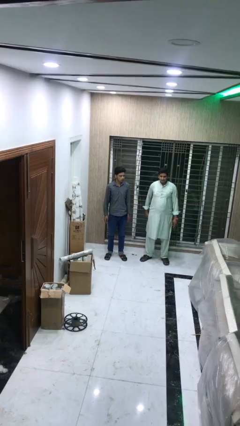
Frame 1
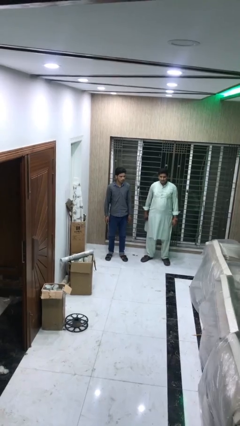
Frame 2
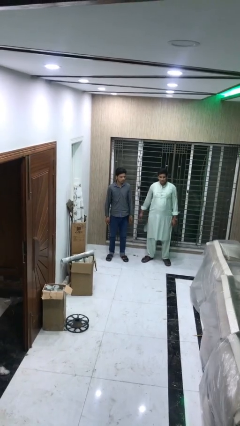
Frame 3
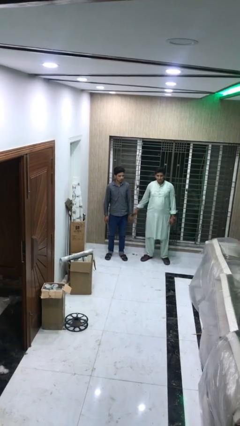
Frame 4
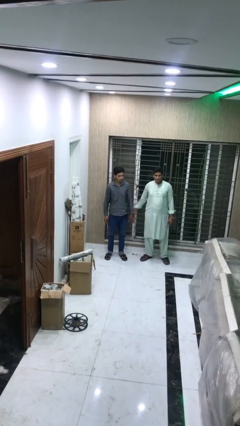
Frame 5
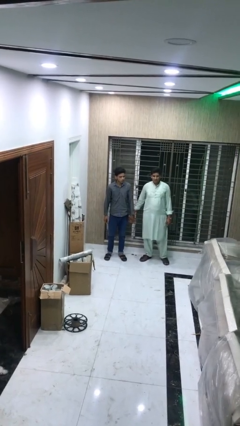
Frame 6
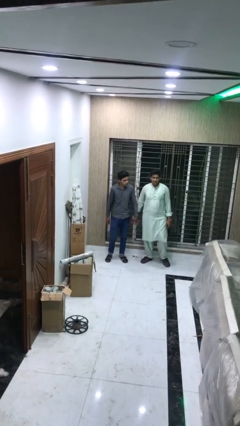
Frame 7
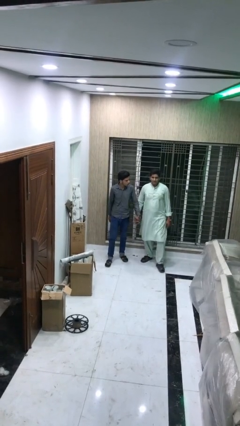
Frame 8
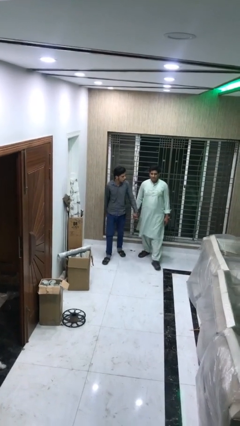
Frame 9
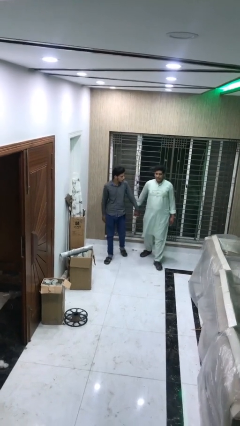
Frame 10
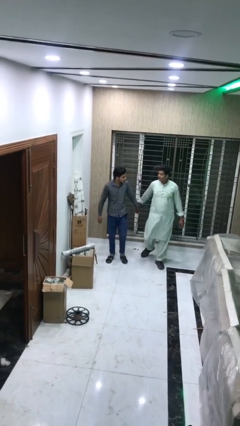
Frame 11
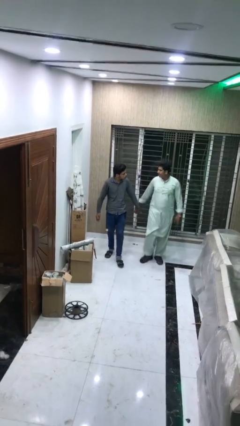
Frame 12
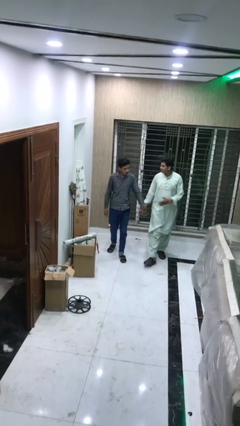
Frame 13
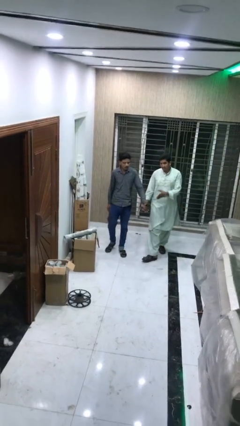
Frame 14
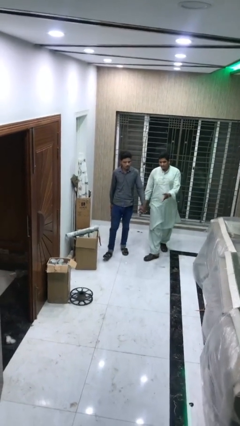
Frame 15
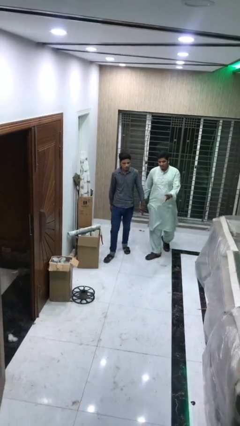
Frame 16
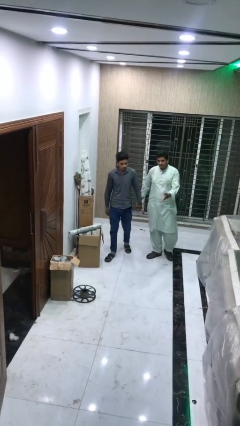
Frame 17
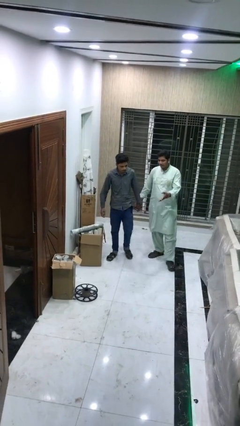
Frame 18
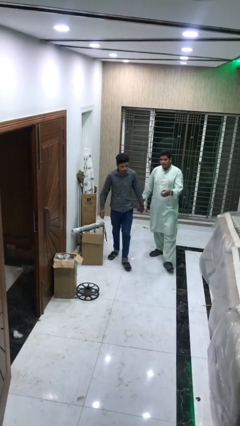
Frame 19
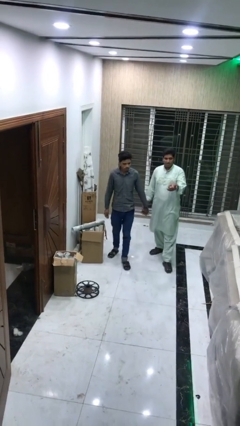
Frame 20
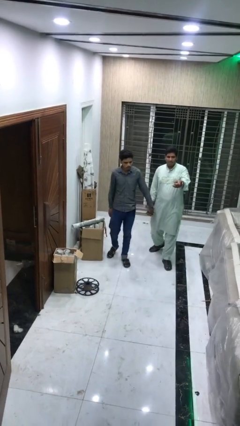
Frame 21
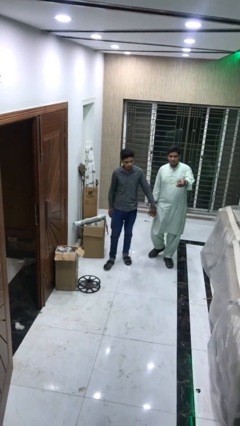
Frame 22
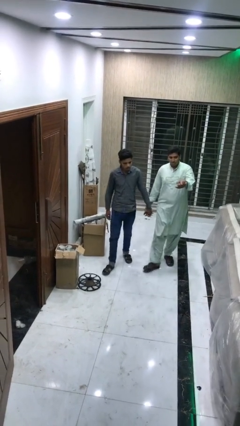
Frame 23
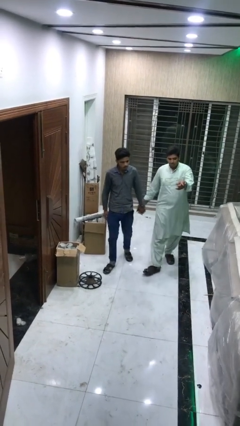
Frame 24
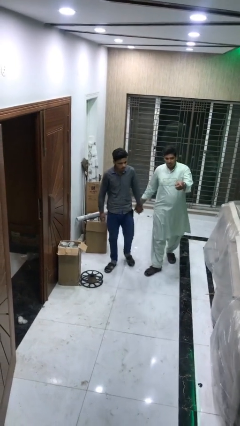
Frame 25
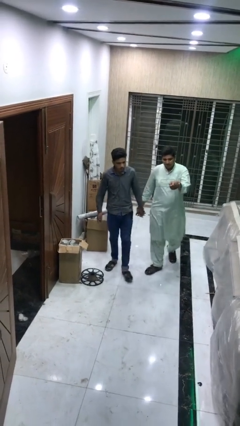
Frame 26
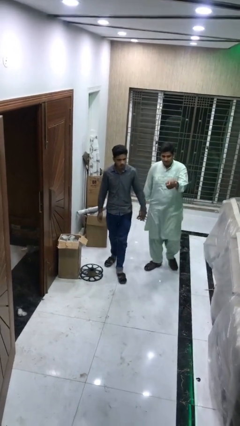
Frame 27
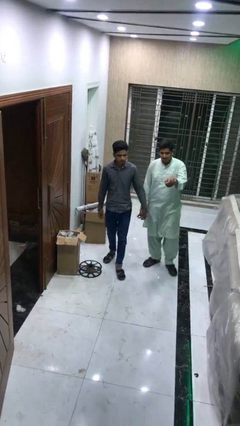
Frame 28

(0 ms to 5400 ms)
person holds hand

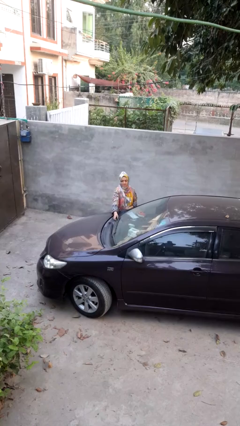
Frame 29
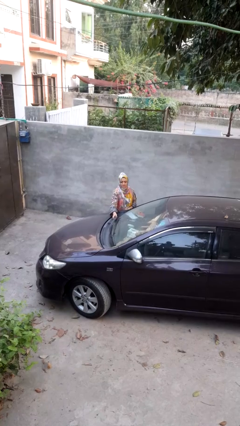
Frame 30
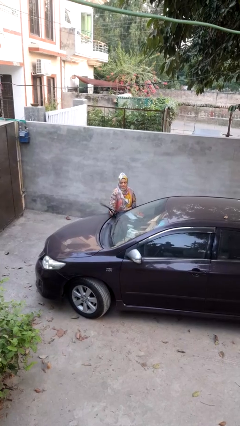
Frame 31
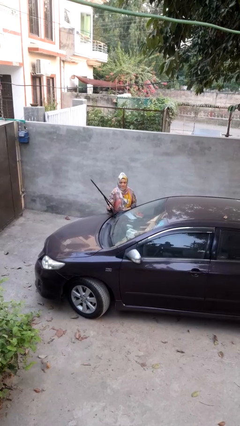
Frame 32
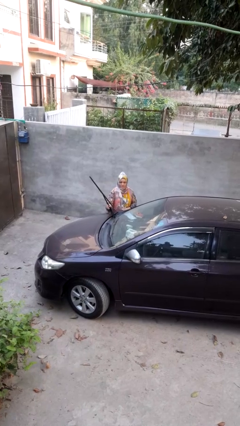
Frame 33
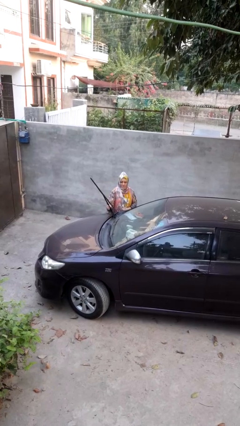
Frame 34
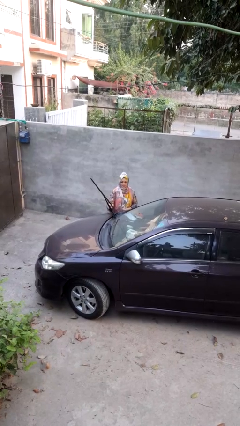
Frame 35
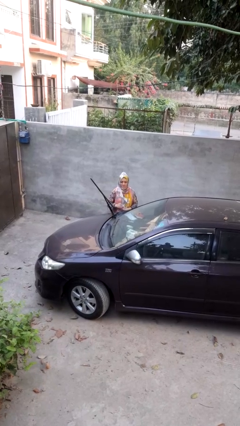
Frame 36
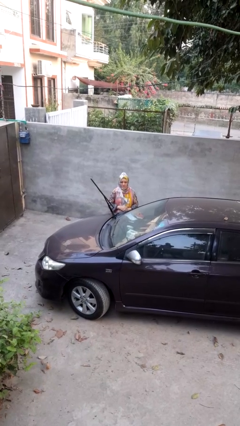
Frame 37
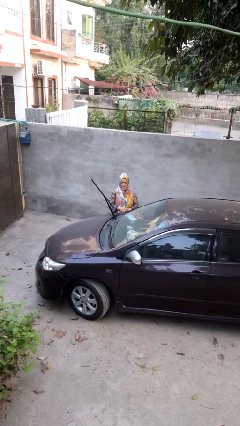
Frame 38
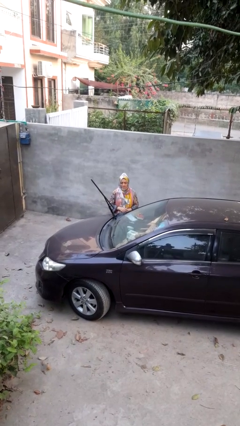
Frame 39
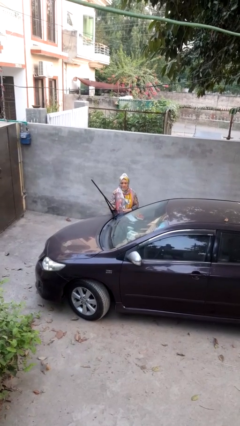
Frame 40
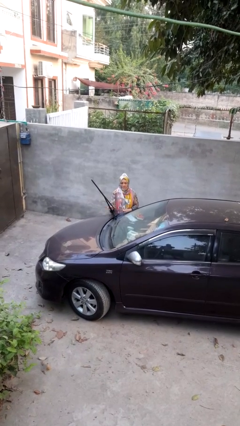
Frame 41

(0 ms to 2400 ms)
person flips up car wipers

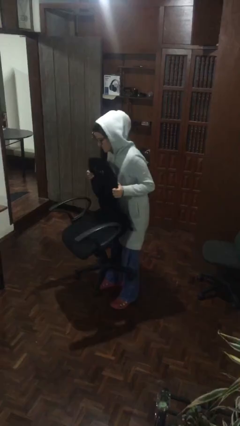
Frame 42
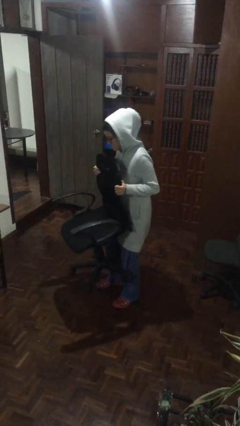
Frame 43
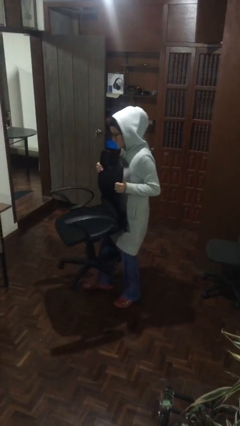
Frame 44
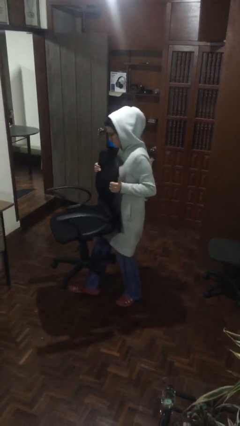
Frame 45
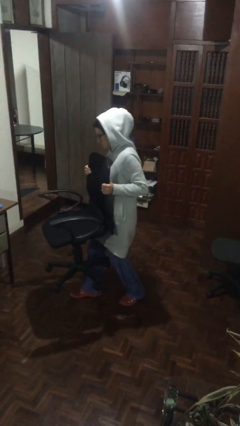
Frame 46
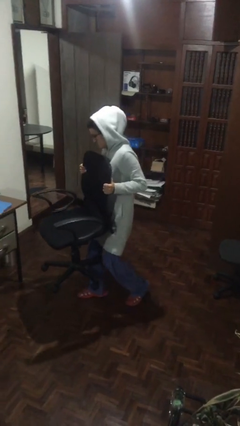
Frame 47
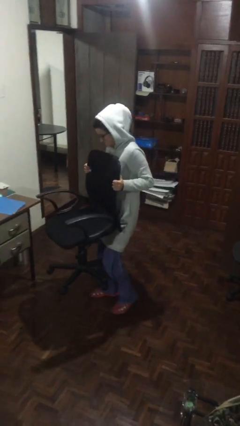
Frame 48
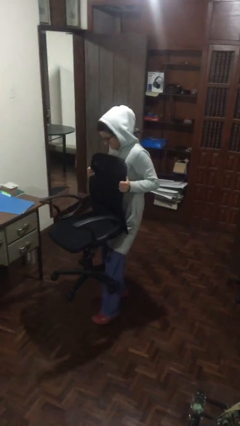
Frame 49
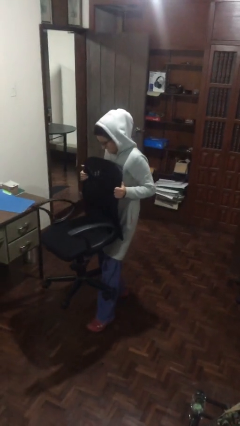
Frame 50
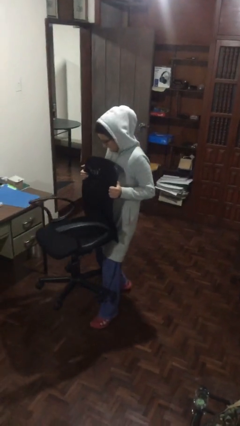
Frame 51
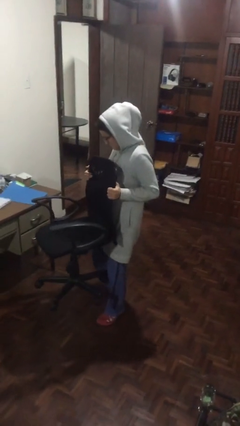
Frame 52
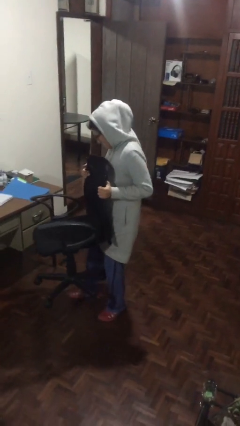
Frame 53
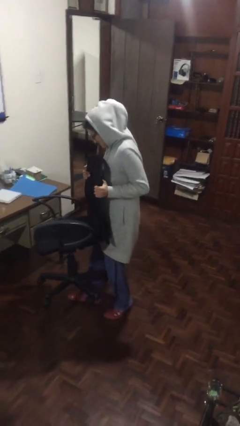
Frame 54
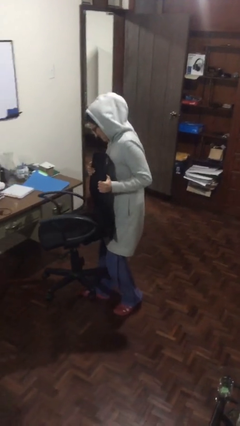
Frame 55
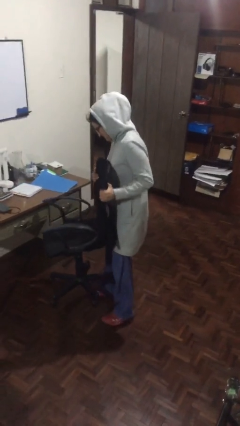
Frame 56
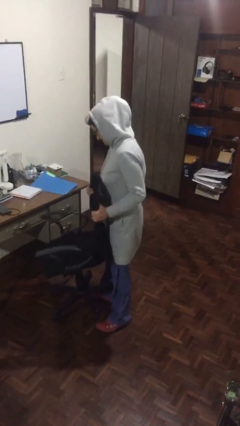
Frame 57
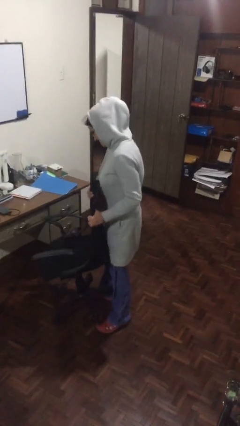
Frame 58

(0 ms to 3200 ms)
person carries heavy object

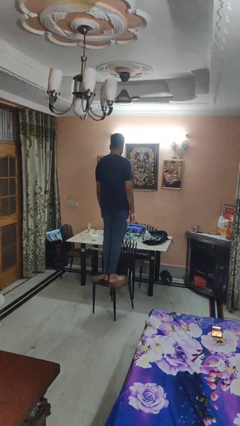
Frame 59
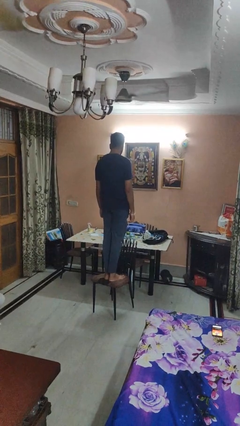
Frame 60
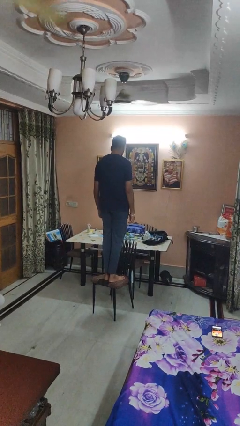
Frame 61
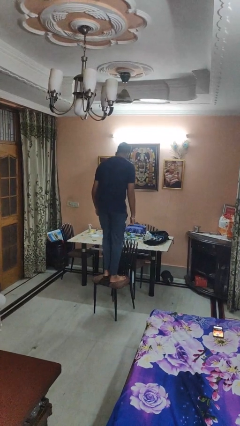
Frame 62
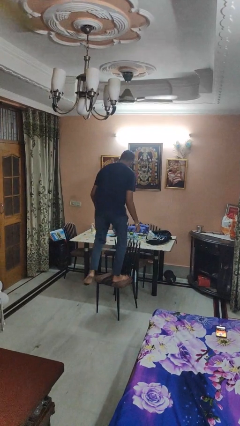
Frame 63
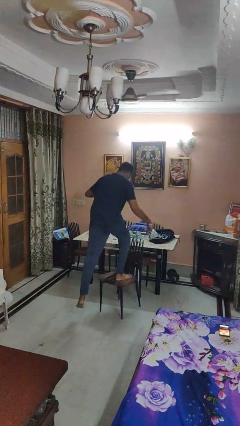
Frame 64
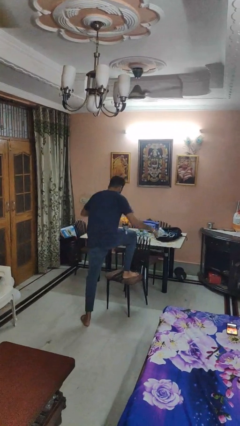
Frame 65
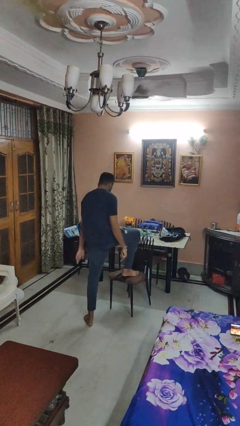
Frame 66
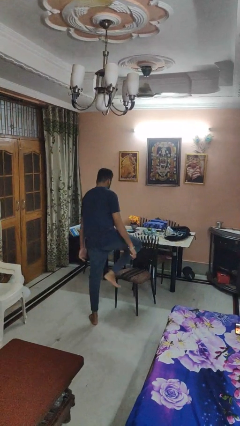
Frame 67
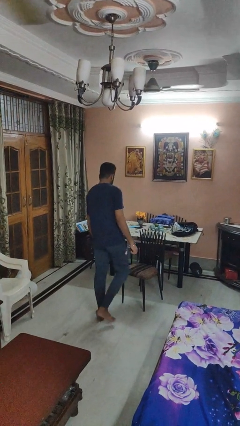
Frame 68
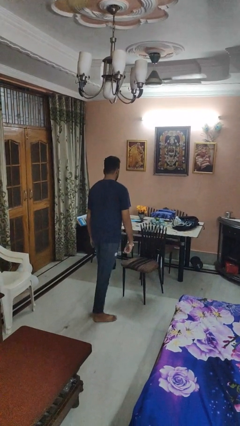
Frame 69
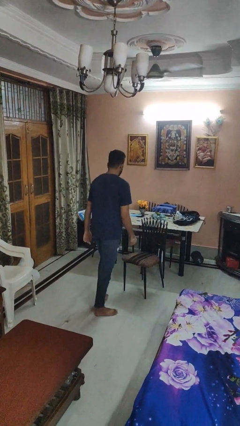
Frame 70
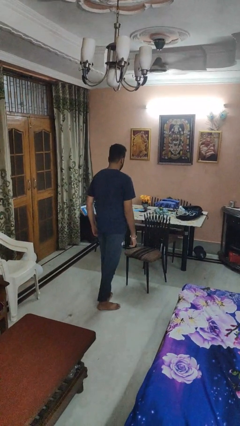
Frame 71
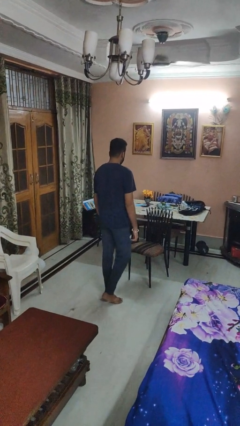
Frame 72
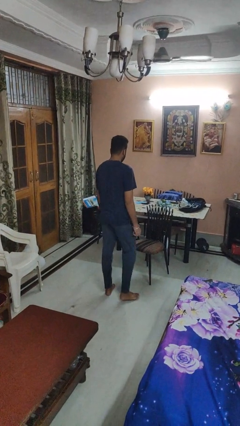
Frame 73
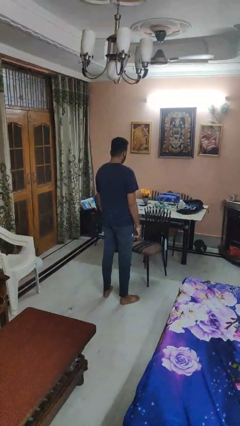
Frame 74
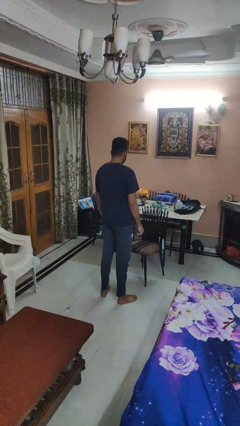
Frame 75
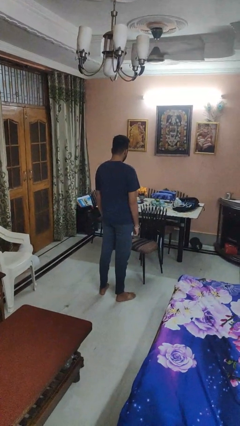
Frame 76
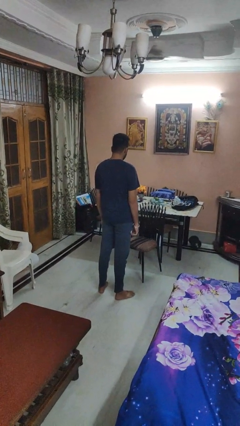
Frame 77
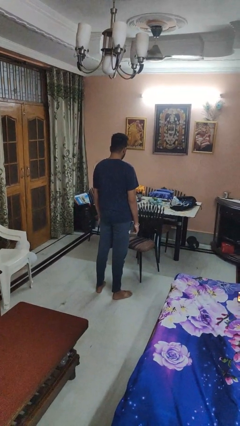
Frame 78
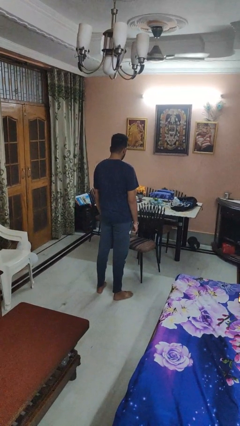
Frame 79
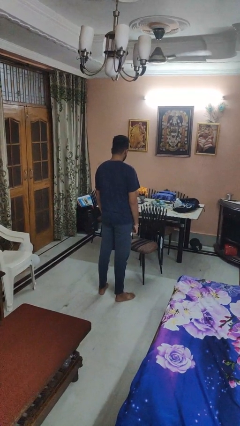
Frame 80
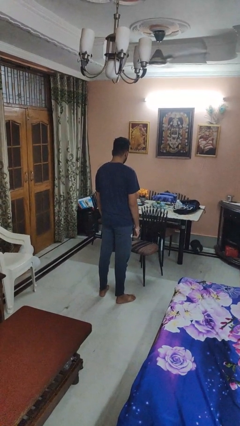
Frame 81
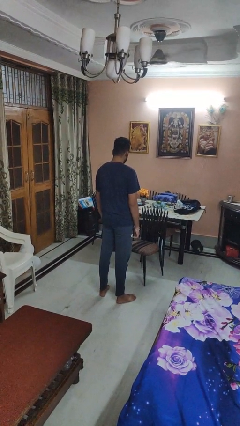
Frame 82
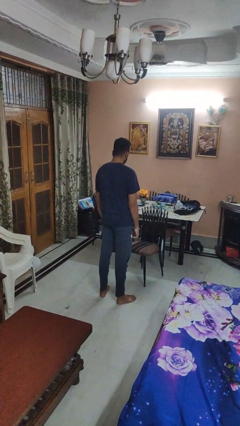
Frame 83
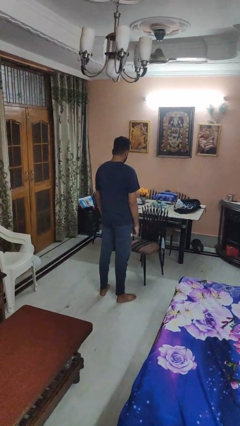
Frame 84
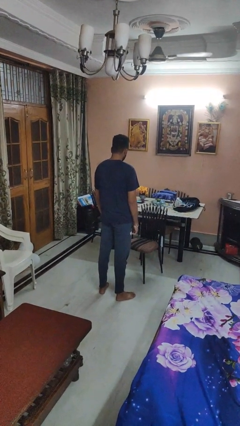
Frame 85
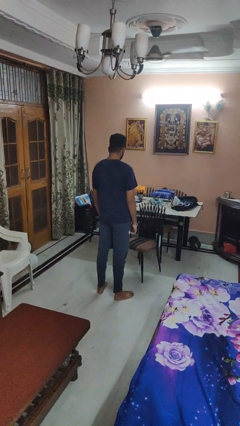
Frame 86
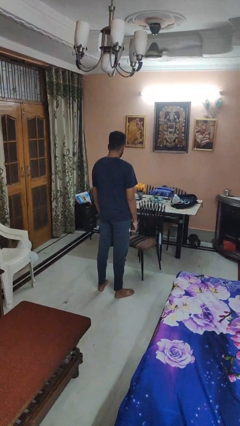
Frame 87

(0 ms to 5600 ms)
person climbs off chair

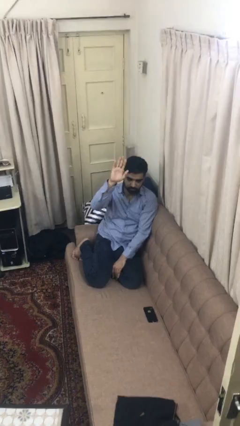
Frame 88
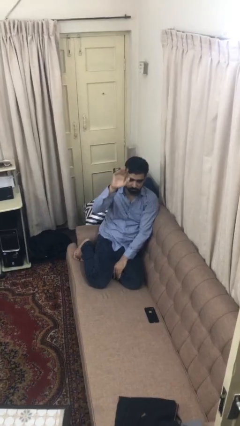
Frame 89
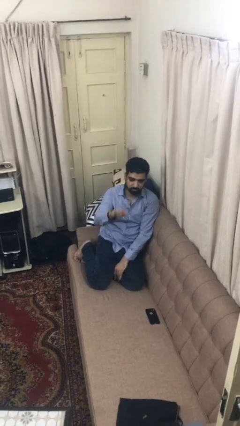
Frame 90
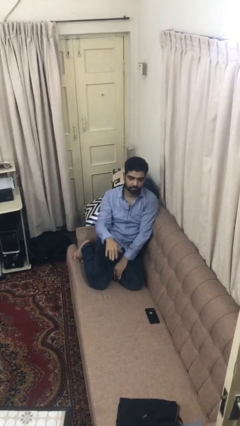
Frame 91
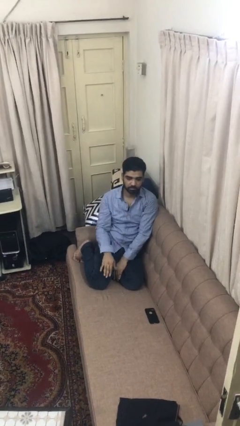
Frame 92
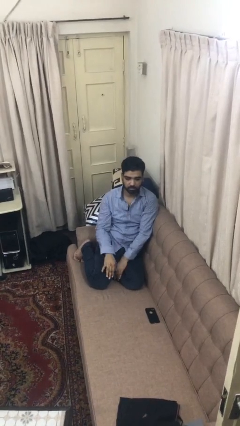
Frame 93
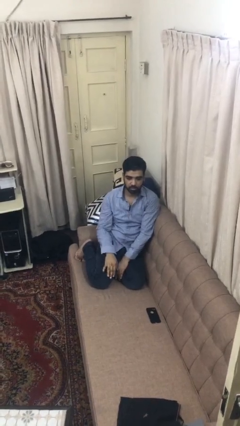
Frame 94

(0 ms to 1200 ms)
person gestures lower hand
